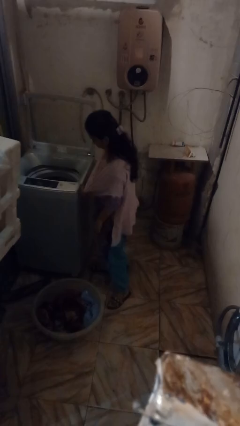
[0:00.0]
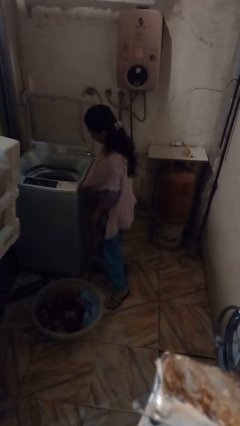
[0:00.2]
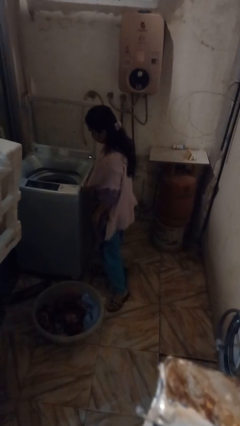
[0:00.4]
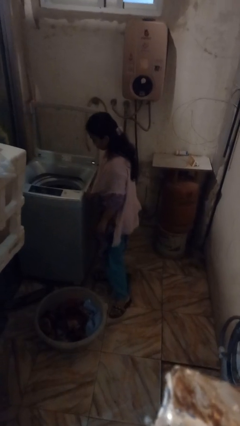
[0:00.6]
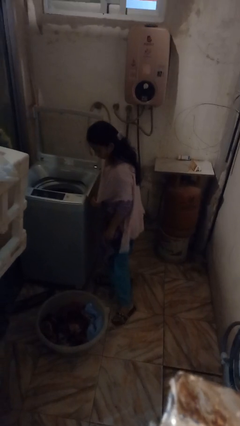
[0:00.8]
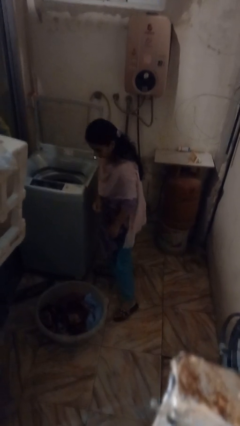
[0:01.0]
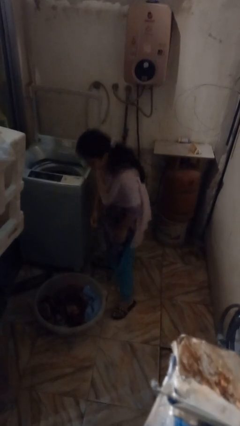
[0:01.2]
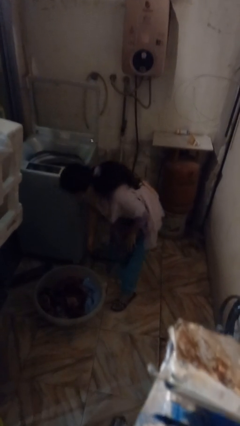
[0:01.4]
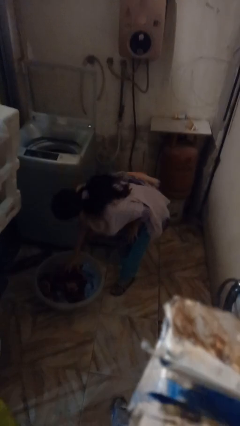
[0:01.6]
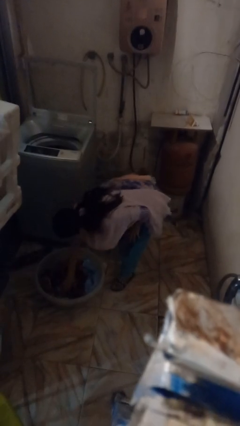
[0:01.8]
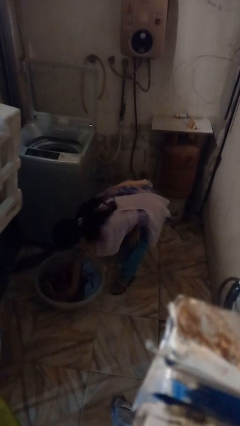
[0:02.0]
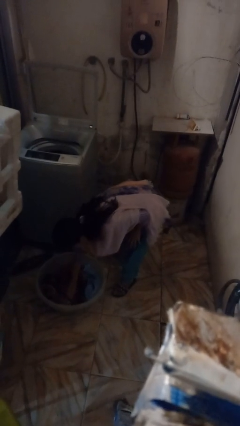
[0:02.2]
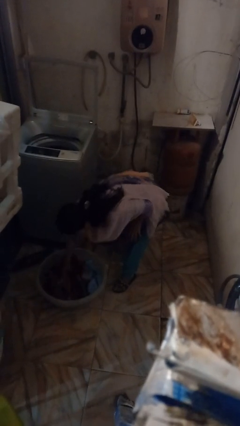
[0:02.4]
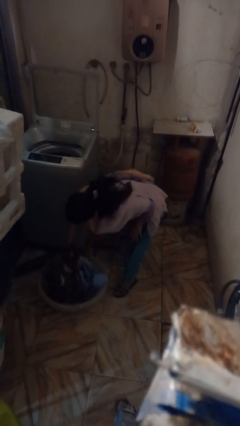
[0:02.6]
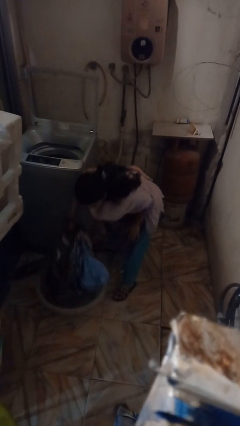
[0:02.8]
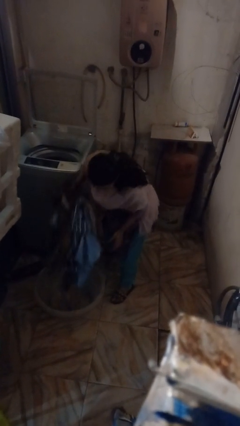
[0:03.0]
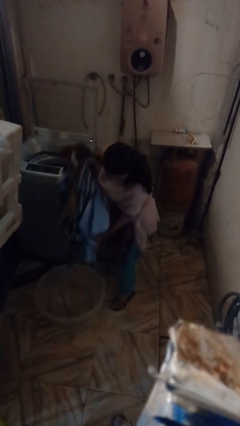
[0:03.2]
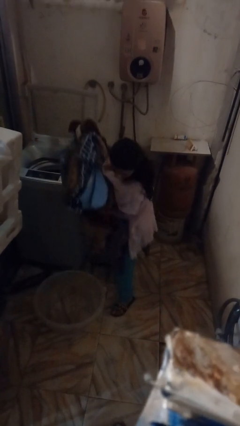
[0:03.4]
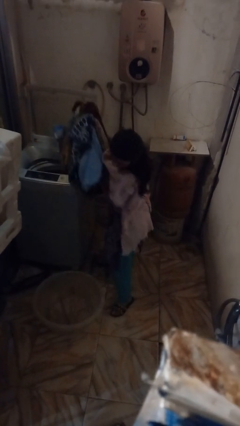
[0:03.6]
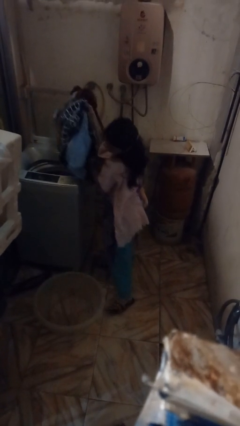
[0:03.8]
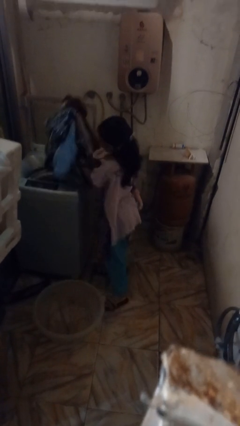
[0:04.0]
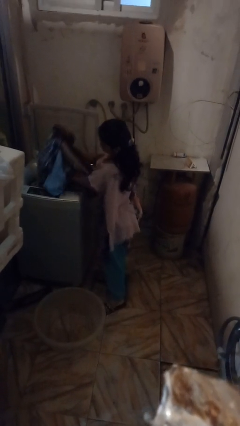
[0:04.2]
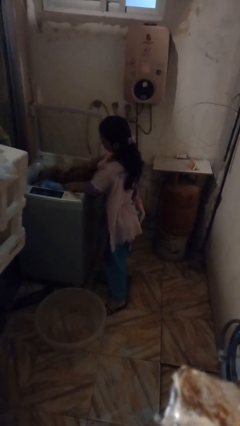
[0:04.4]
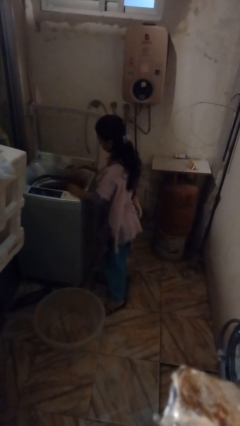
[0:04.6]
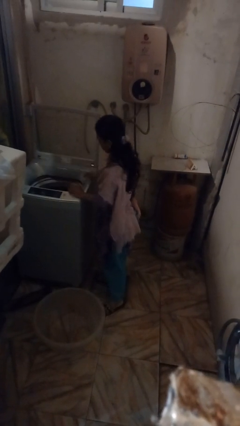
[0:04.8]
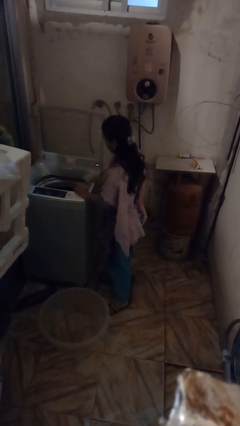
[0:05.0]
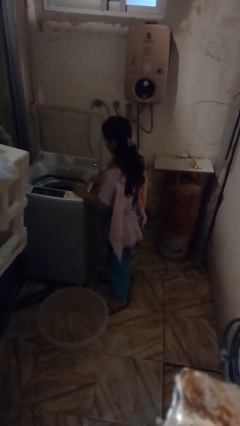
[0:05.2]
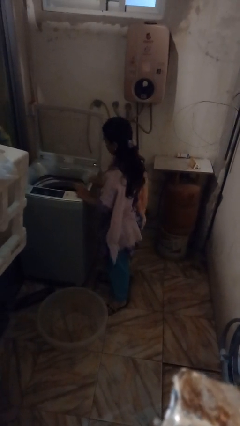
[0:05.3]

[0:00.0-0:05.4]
person loads clotheswasher

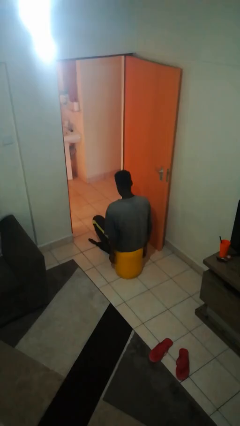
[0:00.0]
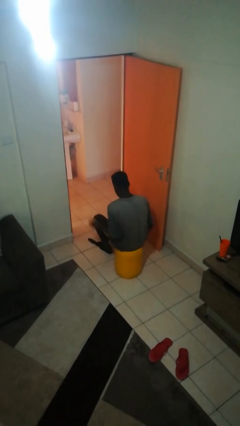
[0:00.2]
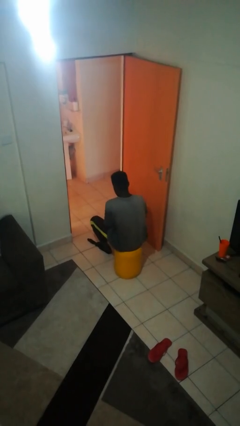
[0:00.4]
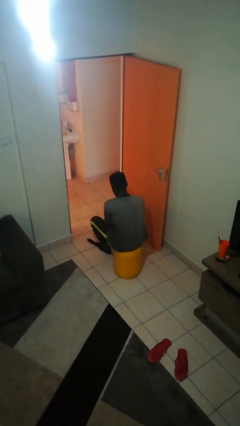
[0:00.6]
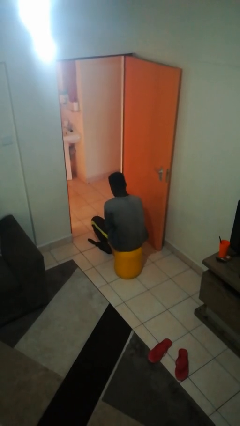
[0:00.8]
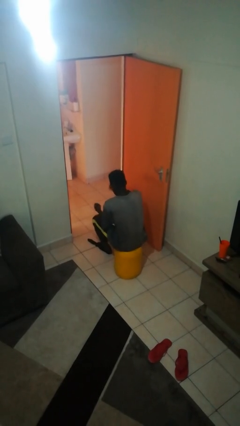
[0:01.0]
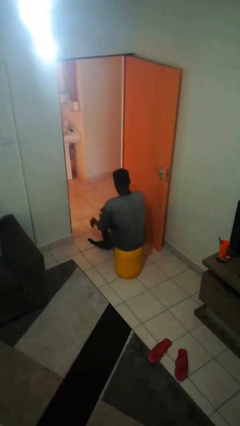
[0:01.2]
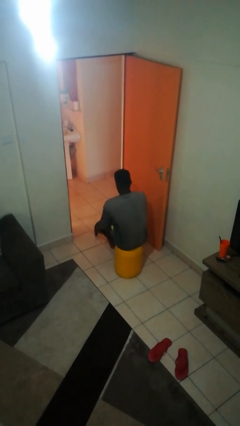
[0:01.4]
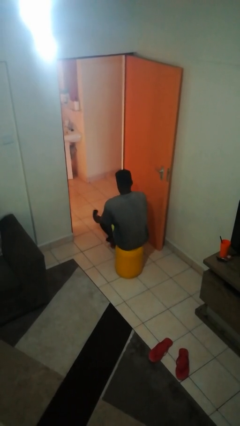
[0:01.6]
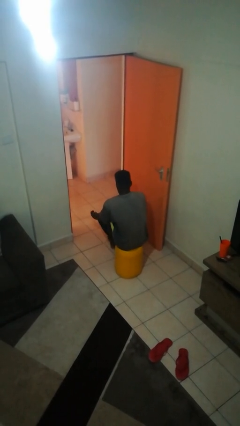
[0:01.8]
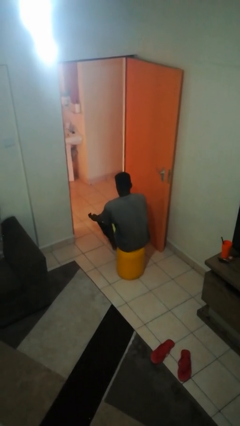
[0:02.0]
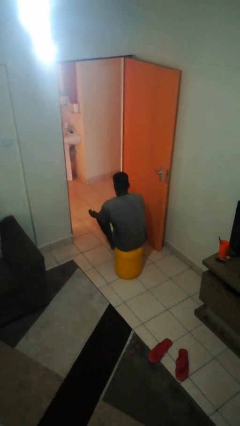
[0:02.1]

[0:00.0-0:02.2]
person takes off socks

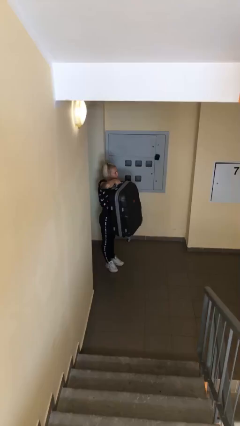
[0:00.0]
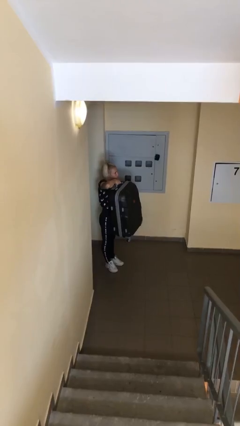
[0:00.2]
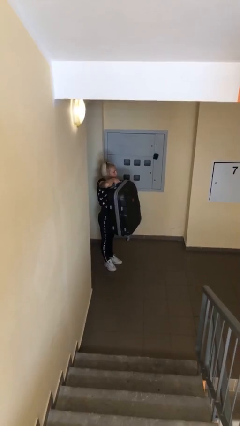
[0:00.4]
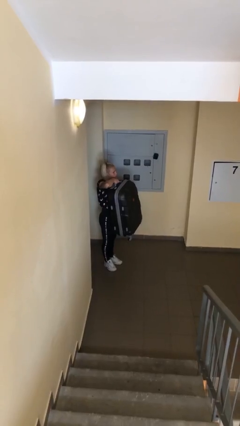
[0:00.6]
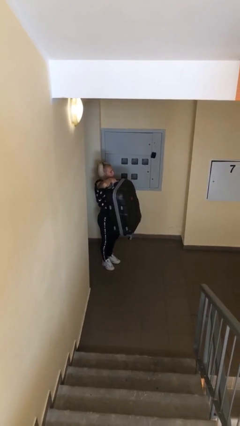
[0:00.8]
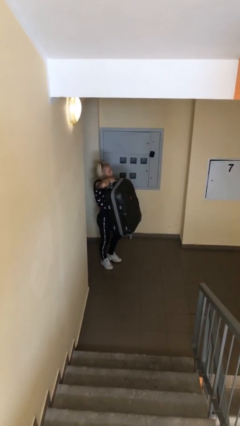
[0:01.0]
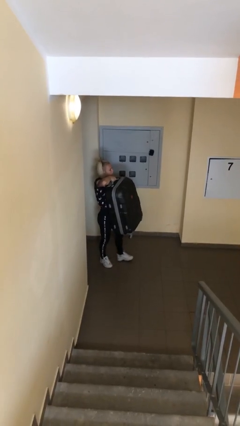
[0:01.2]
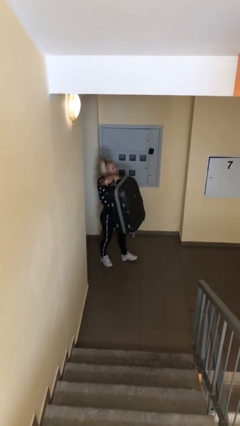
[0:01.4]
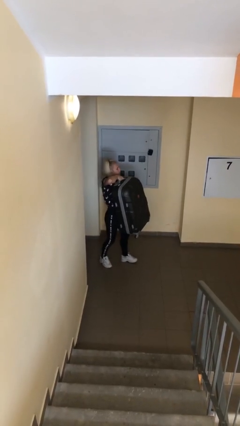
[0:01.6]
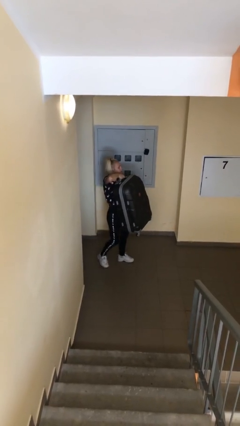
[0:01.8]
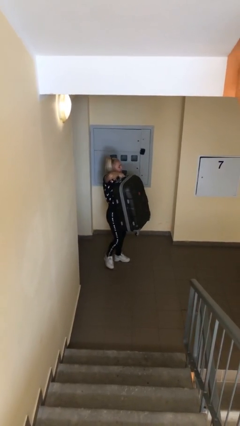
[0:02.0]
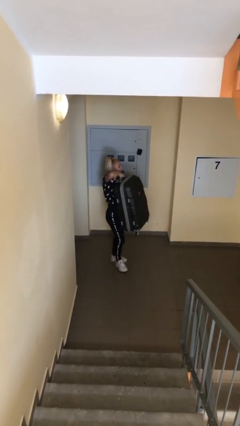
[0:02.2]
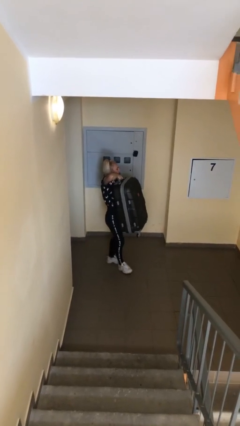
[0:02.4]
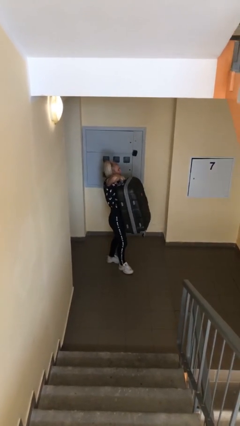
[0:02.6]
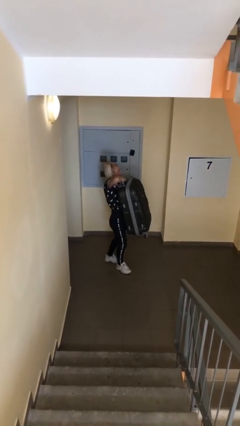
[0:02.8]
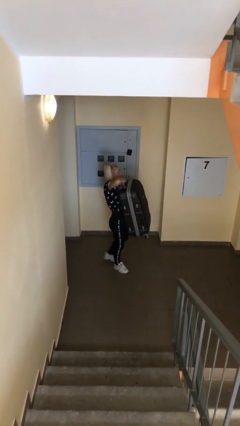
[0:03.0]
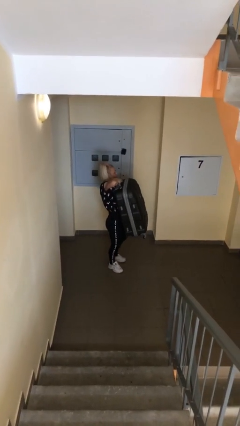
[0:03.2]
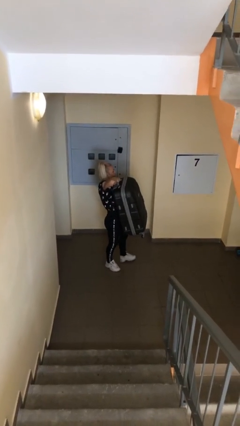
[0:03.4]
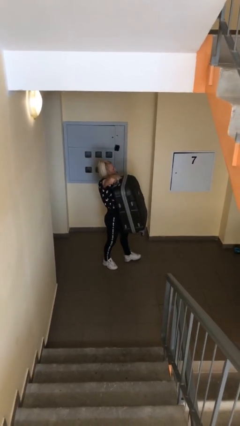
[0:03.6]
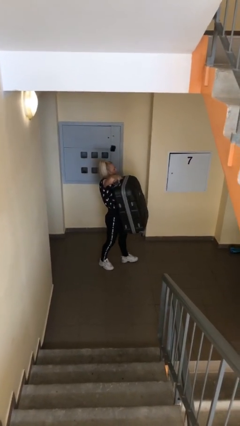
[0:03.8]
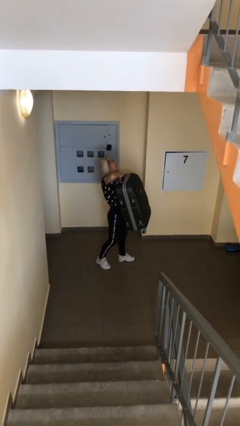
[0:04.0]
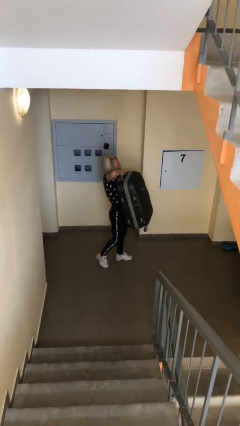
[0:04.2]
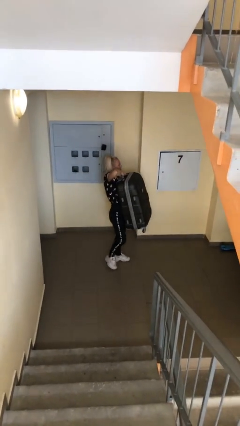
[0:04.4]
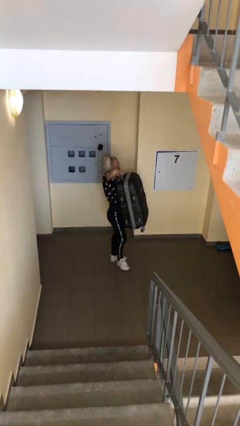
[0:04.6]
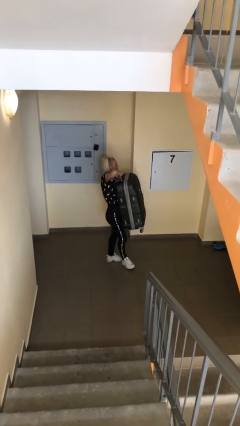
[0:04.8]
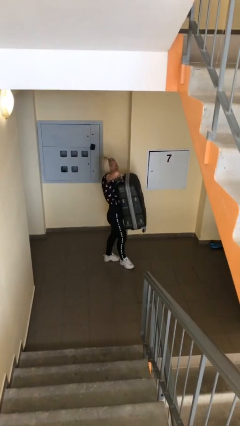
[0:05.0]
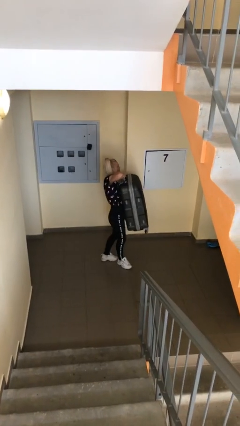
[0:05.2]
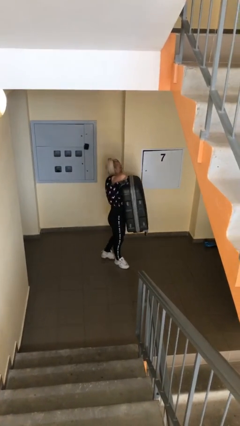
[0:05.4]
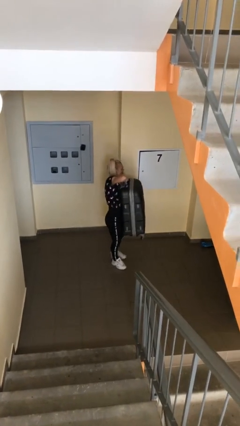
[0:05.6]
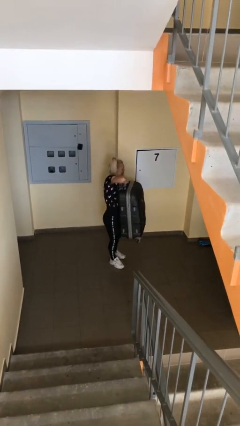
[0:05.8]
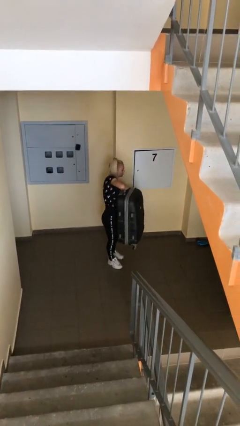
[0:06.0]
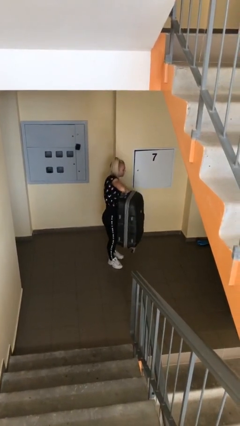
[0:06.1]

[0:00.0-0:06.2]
person carries heavy object

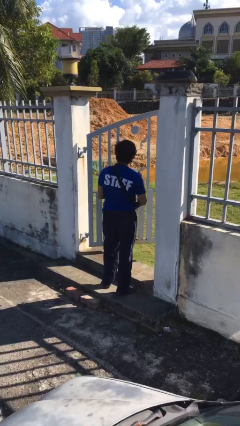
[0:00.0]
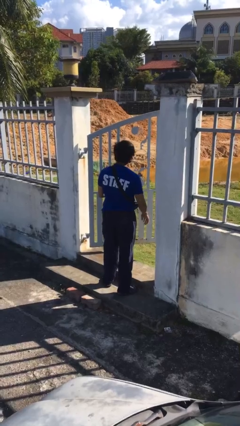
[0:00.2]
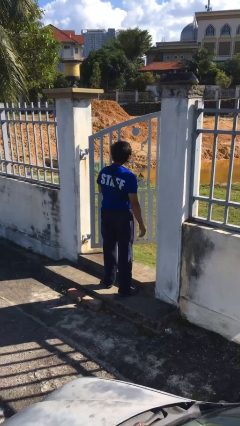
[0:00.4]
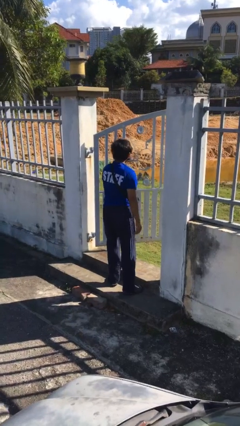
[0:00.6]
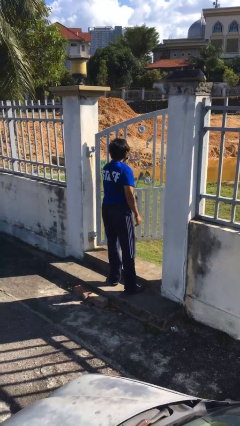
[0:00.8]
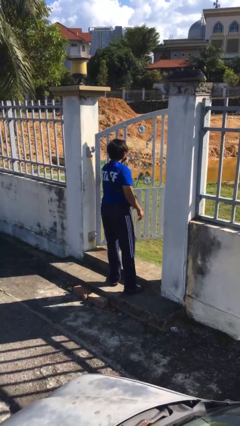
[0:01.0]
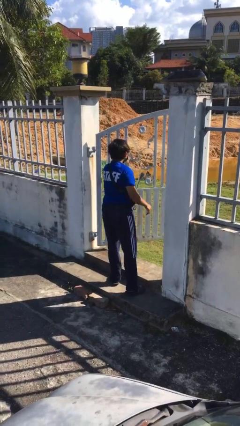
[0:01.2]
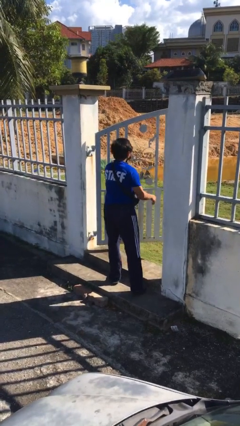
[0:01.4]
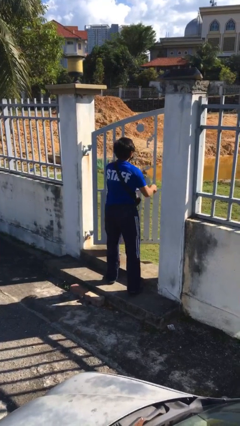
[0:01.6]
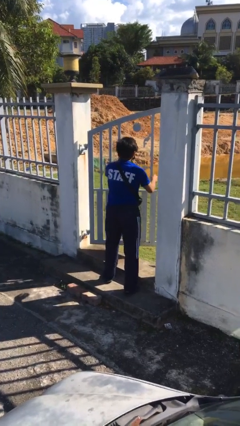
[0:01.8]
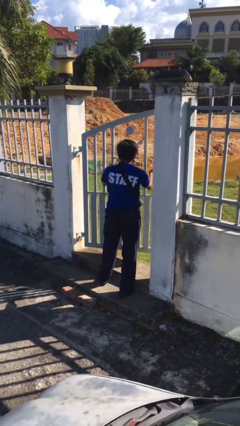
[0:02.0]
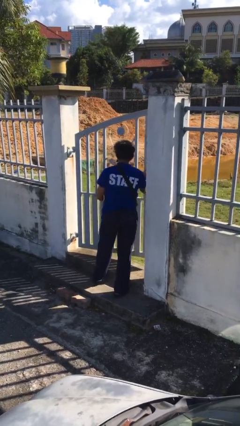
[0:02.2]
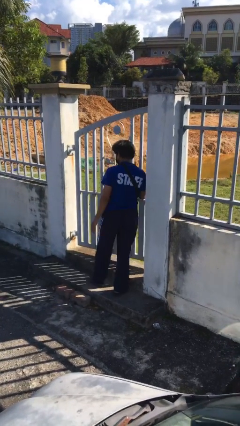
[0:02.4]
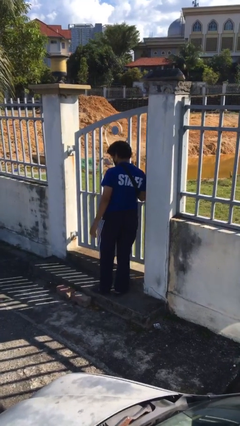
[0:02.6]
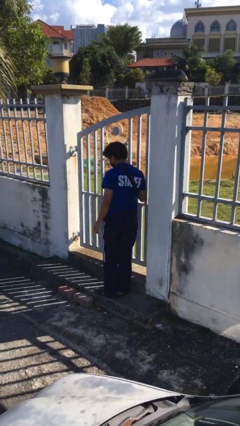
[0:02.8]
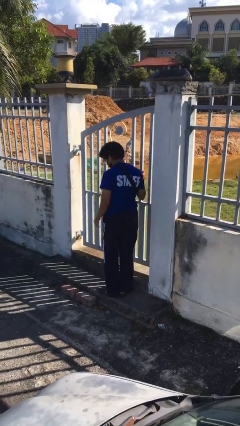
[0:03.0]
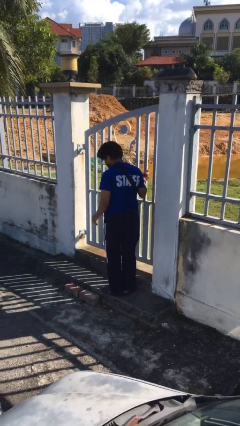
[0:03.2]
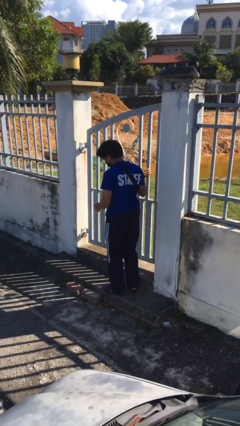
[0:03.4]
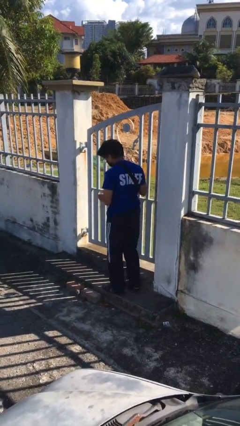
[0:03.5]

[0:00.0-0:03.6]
person closes facility door

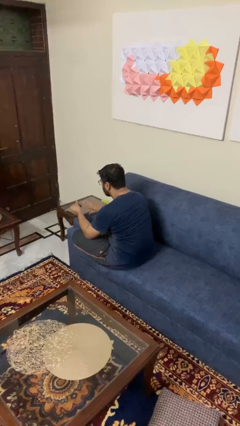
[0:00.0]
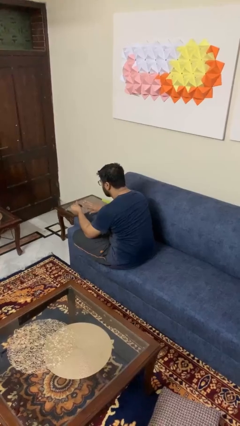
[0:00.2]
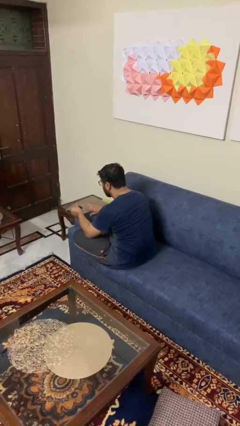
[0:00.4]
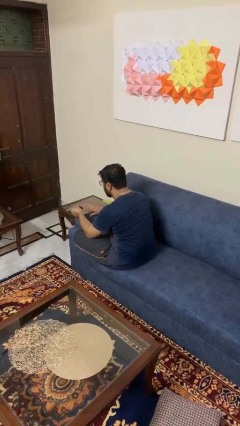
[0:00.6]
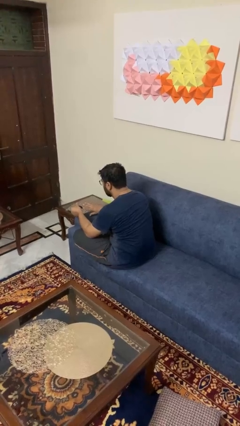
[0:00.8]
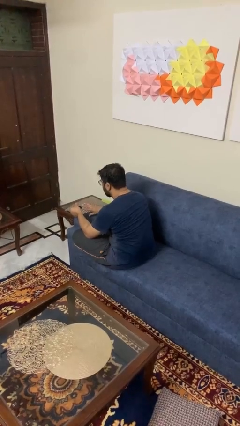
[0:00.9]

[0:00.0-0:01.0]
person clips fingernails
